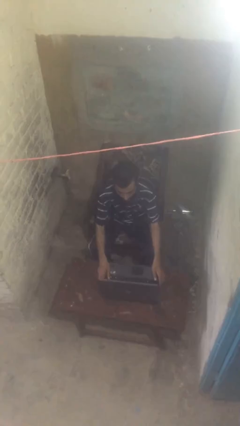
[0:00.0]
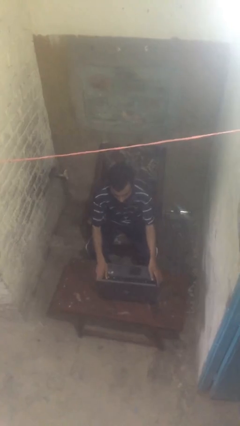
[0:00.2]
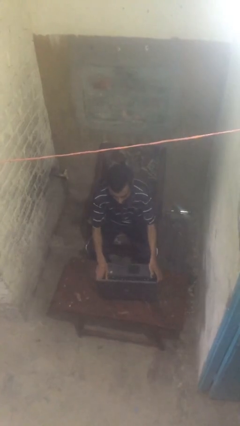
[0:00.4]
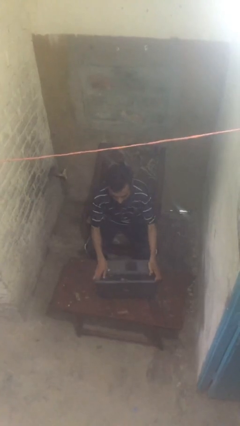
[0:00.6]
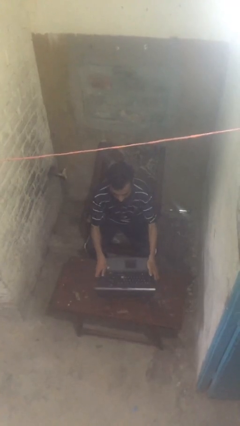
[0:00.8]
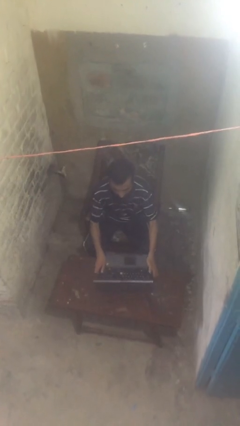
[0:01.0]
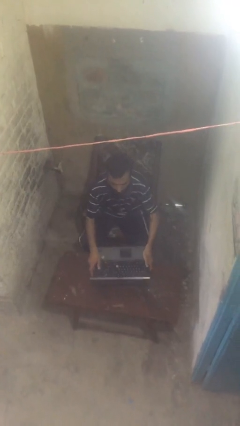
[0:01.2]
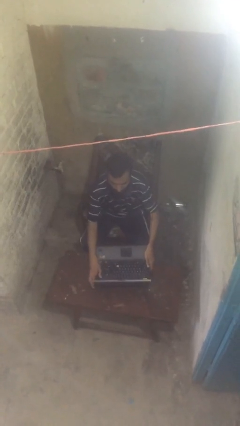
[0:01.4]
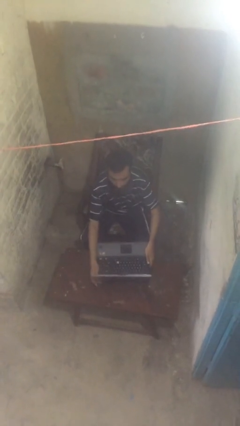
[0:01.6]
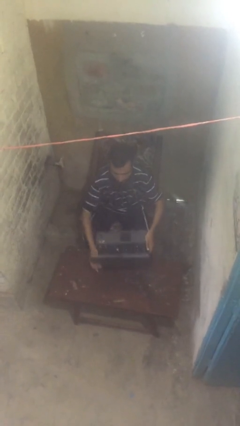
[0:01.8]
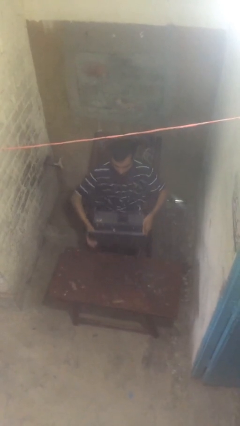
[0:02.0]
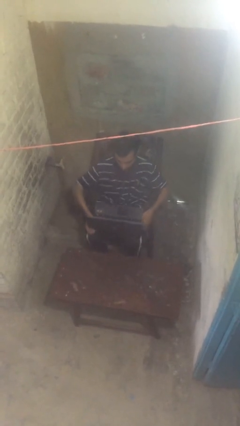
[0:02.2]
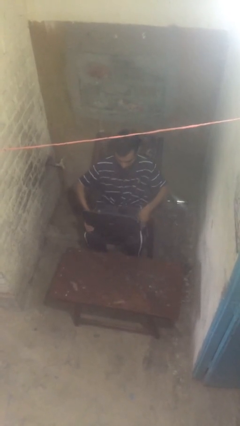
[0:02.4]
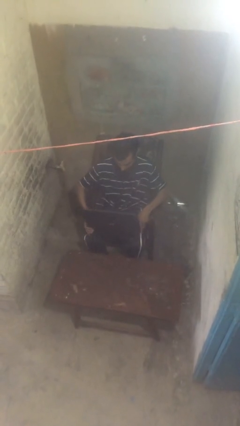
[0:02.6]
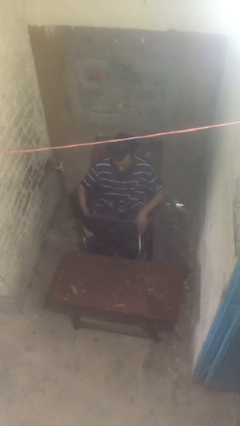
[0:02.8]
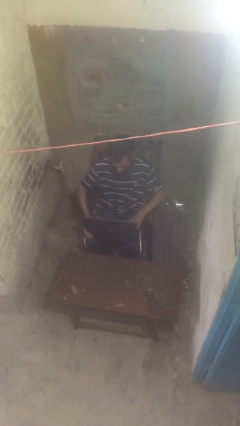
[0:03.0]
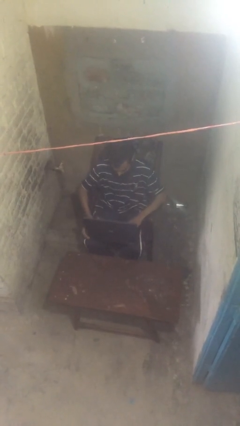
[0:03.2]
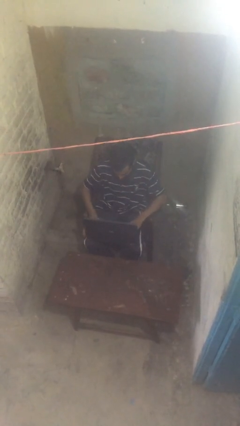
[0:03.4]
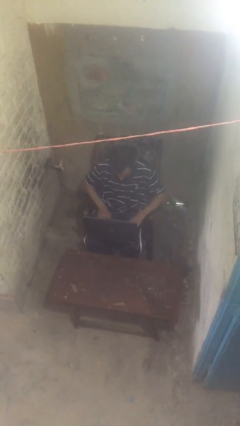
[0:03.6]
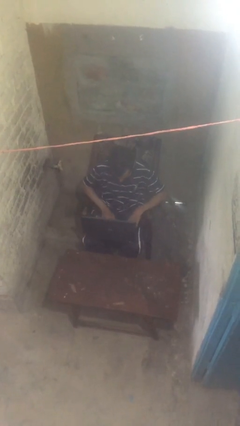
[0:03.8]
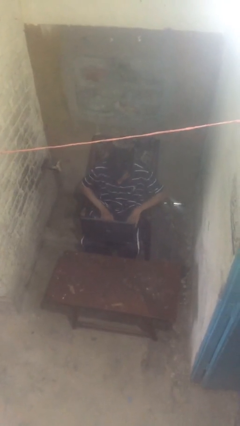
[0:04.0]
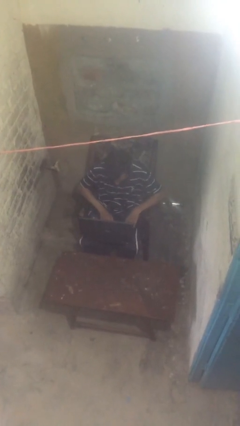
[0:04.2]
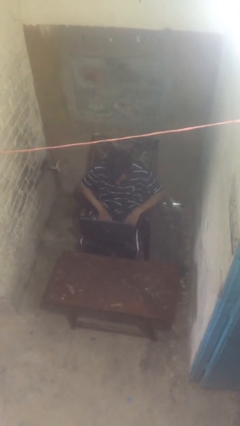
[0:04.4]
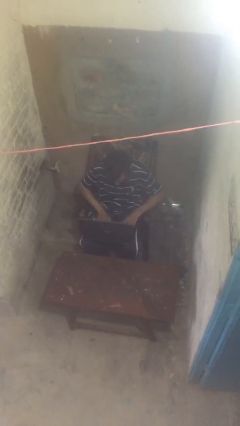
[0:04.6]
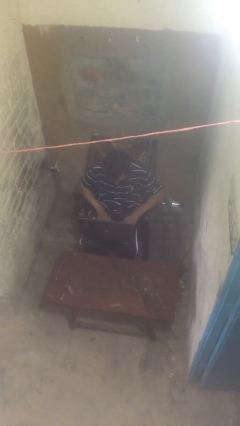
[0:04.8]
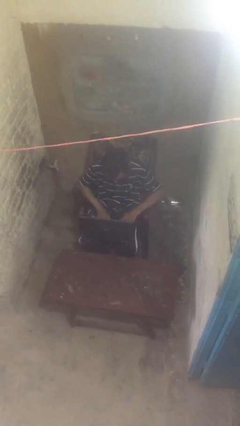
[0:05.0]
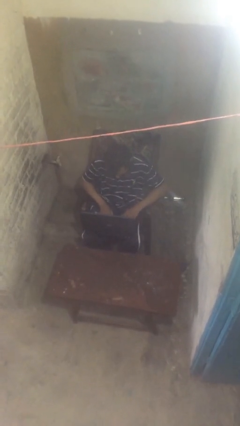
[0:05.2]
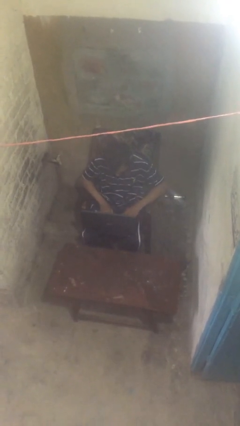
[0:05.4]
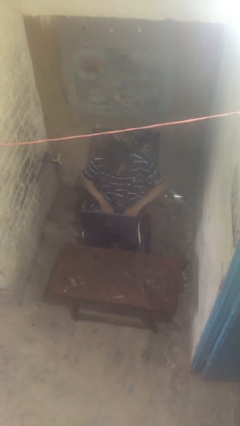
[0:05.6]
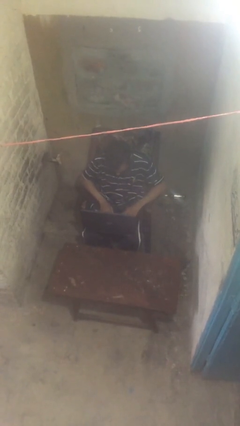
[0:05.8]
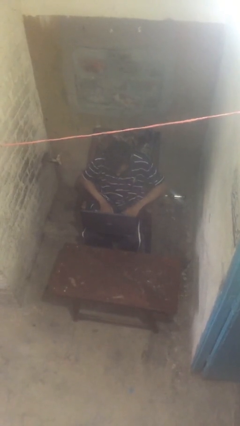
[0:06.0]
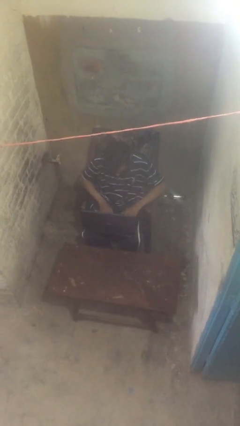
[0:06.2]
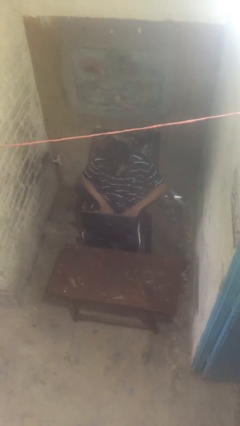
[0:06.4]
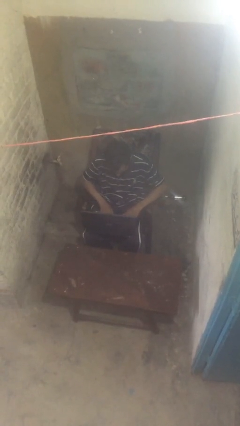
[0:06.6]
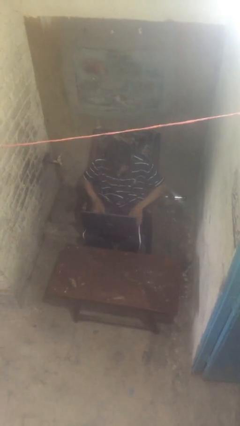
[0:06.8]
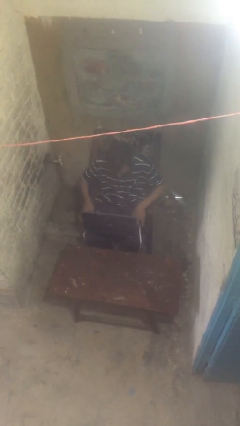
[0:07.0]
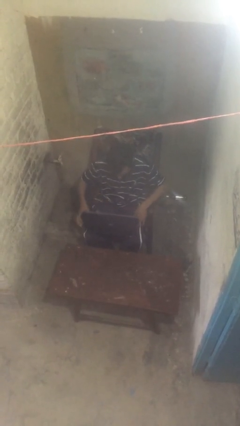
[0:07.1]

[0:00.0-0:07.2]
person interacts with laptop

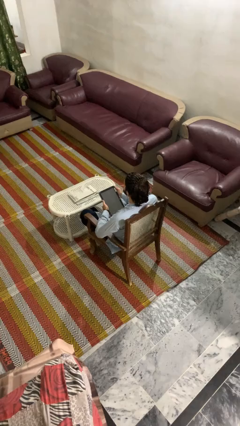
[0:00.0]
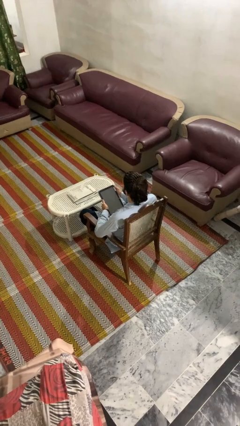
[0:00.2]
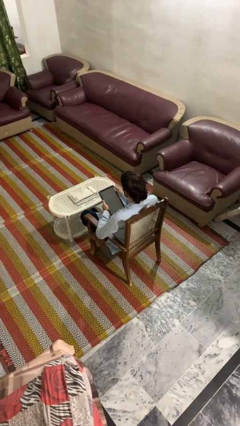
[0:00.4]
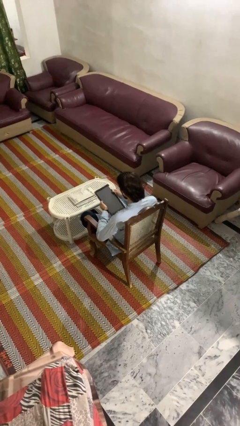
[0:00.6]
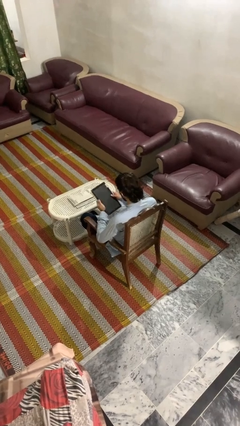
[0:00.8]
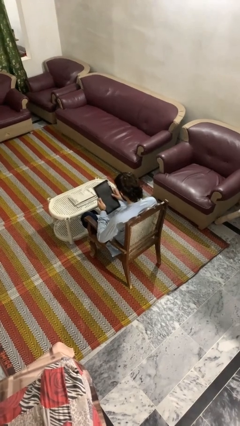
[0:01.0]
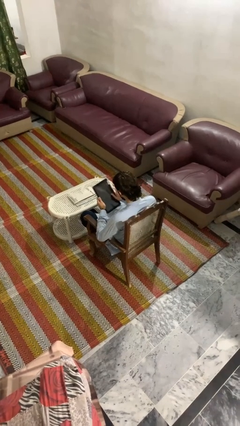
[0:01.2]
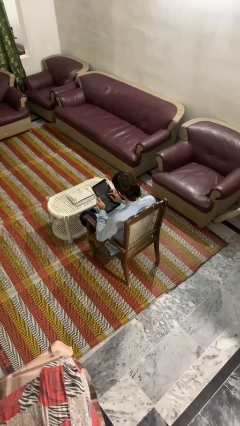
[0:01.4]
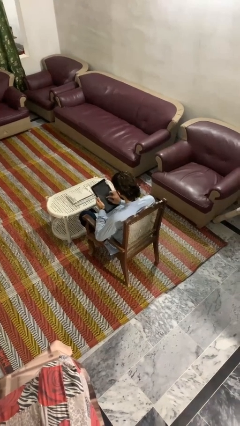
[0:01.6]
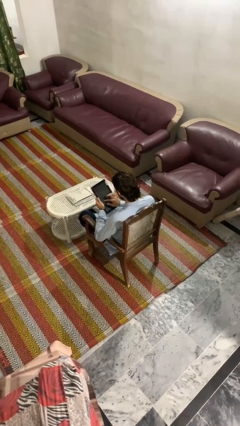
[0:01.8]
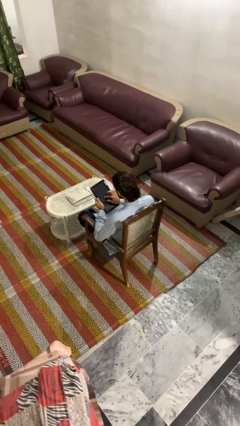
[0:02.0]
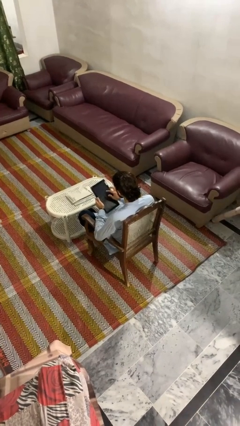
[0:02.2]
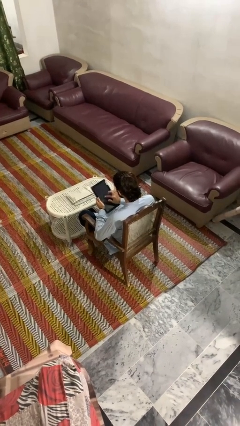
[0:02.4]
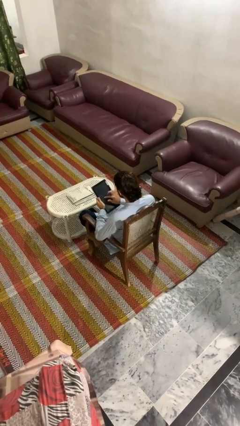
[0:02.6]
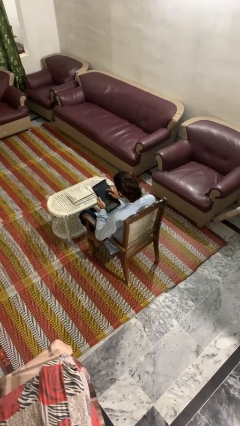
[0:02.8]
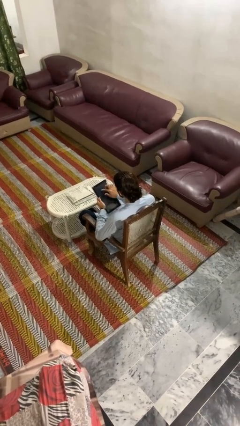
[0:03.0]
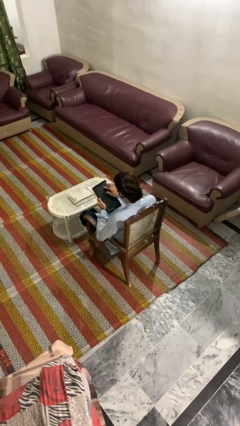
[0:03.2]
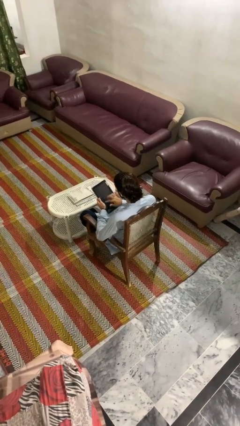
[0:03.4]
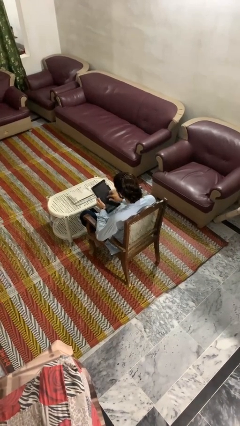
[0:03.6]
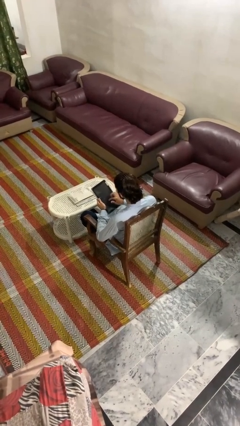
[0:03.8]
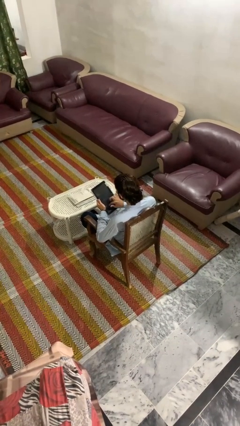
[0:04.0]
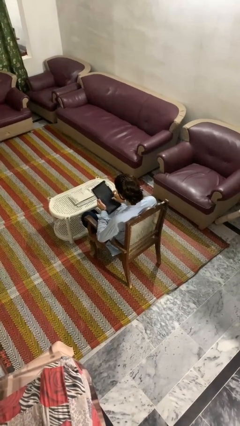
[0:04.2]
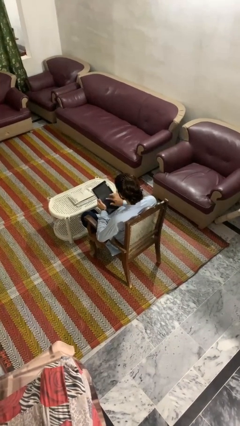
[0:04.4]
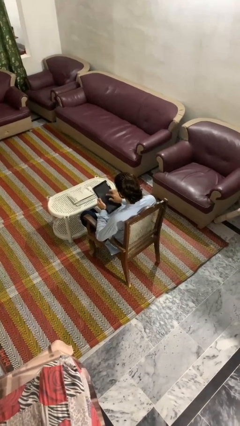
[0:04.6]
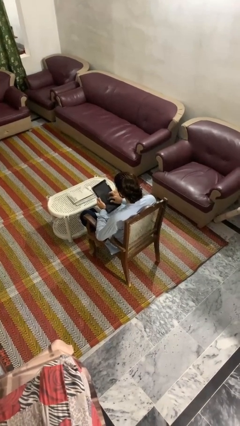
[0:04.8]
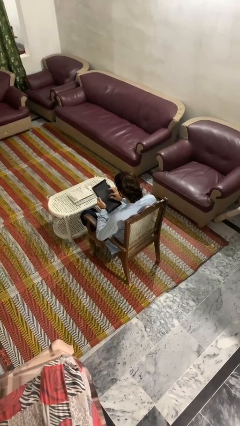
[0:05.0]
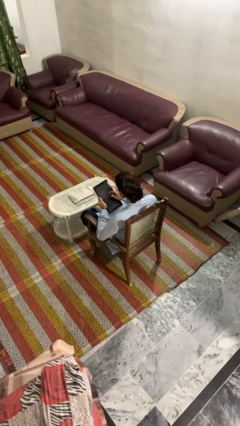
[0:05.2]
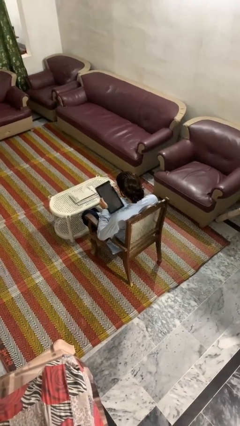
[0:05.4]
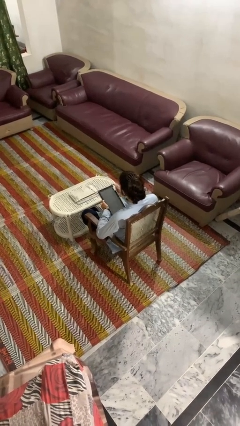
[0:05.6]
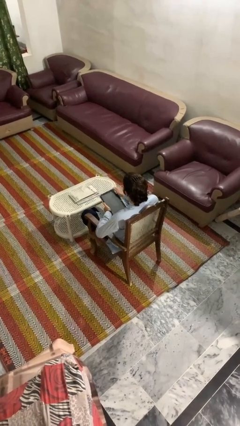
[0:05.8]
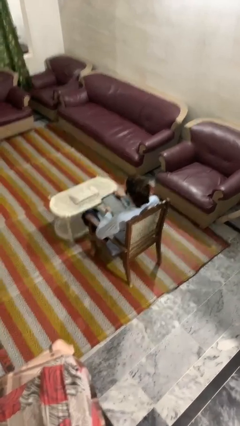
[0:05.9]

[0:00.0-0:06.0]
person interacts with tablet

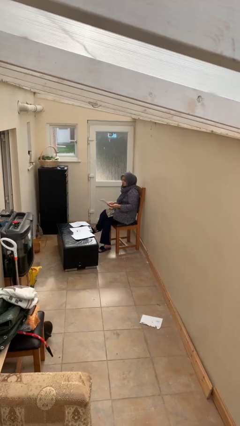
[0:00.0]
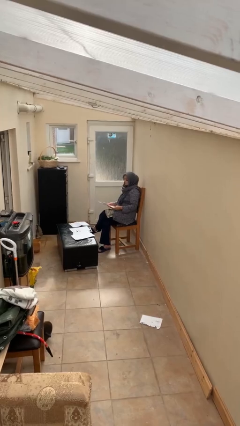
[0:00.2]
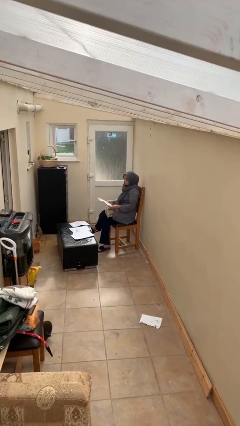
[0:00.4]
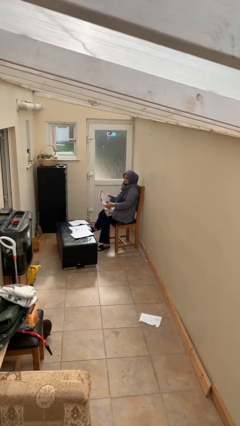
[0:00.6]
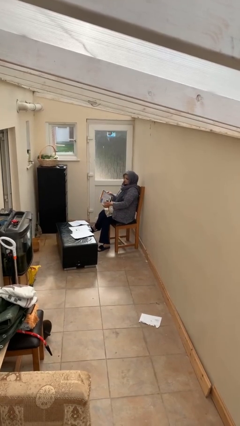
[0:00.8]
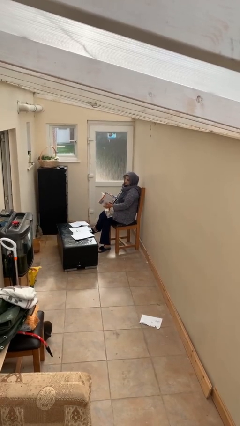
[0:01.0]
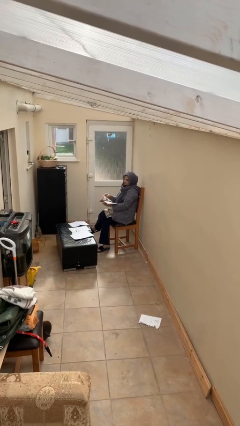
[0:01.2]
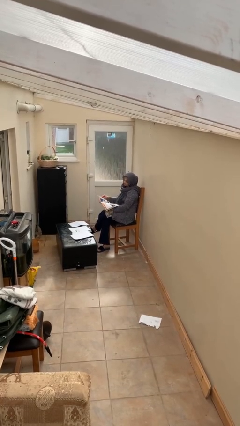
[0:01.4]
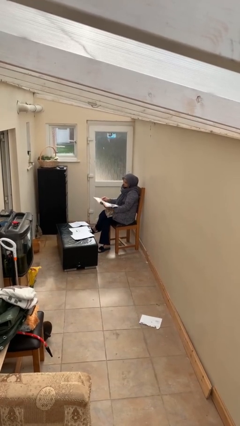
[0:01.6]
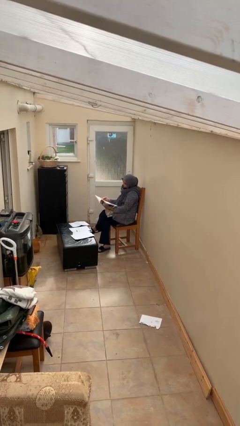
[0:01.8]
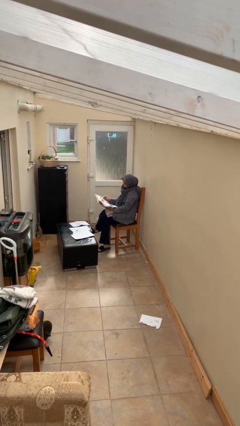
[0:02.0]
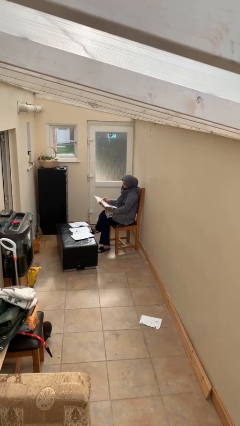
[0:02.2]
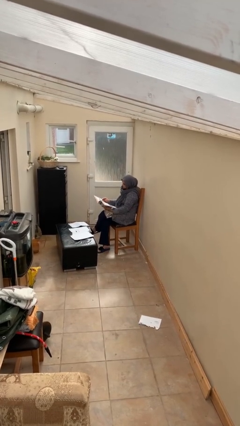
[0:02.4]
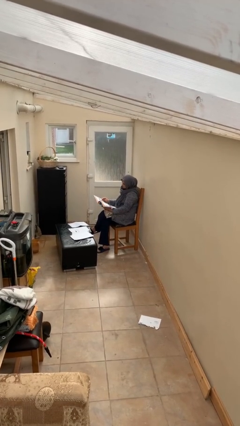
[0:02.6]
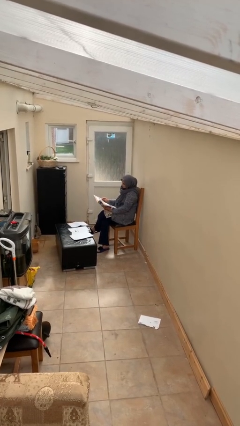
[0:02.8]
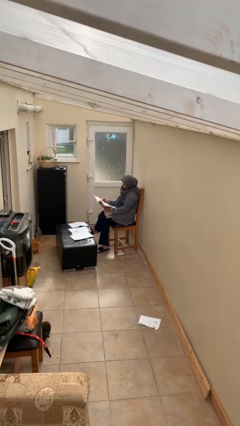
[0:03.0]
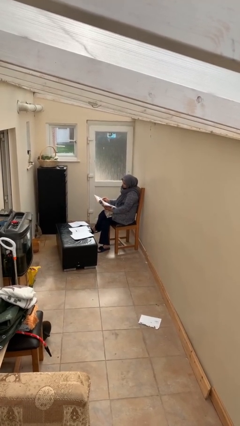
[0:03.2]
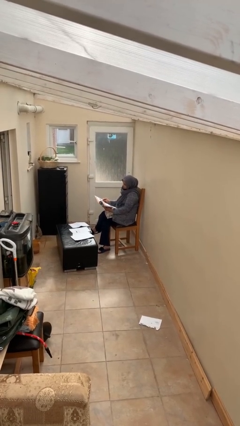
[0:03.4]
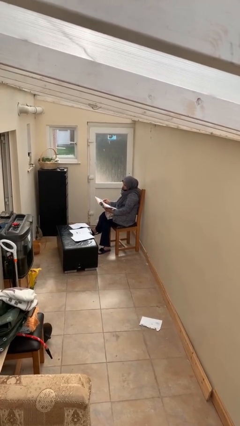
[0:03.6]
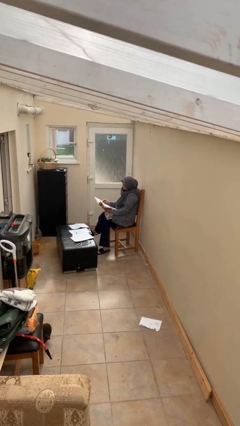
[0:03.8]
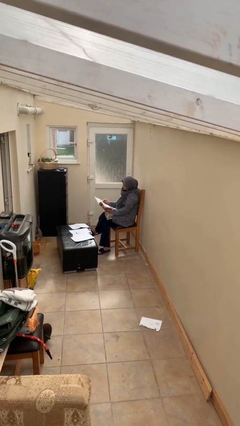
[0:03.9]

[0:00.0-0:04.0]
person reads document

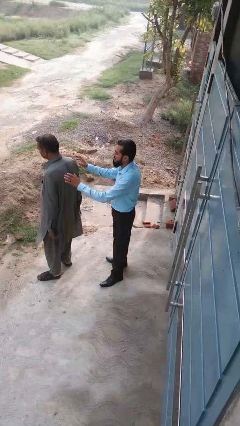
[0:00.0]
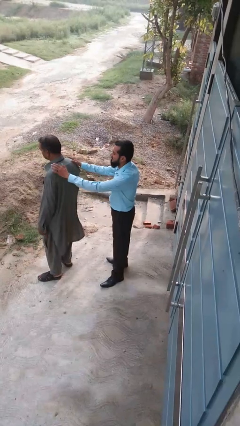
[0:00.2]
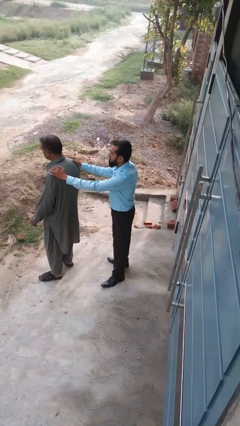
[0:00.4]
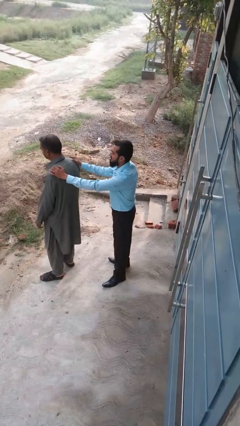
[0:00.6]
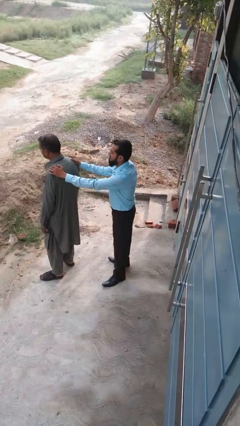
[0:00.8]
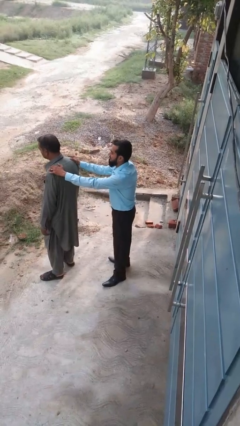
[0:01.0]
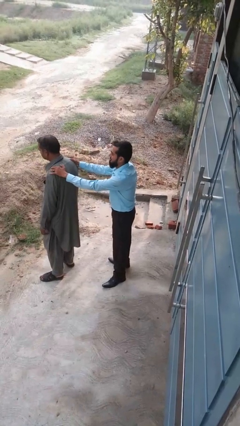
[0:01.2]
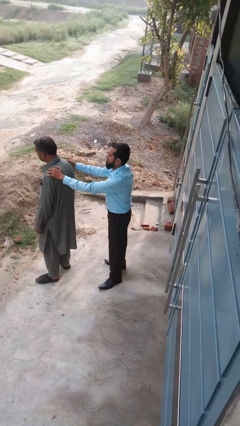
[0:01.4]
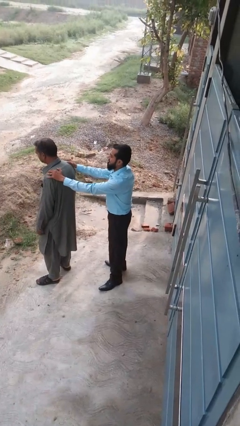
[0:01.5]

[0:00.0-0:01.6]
person grabs person by shoulder
